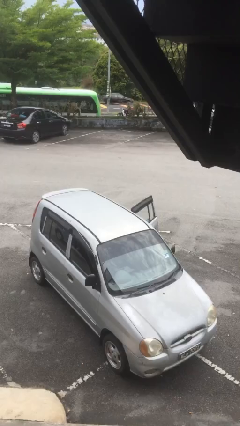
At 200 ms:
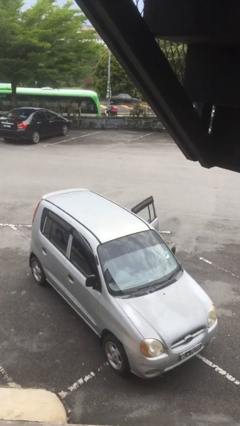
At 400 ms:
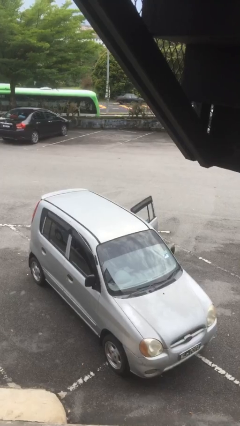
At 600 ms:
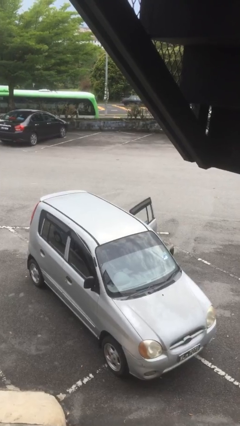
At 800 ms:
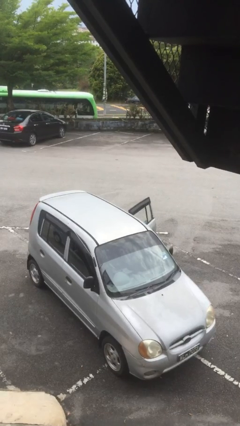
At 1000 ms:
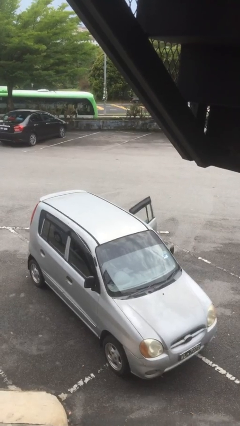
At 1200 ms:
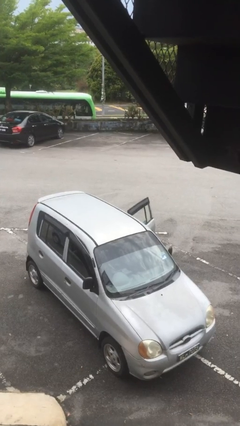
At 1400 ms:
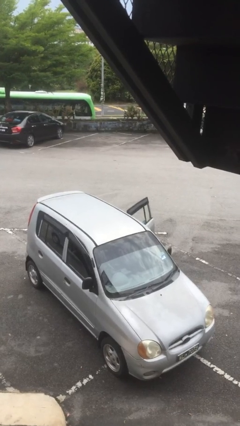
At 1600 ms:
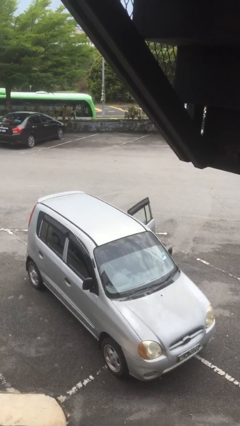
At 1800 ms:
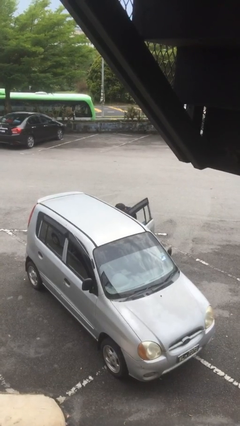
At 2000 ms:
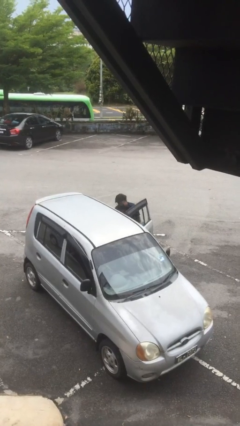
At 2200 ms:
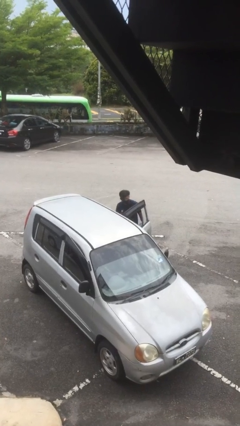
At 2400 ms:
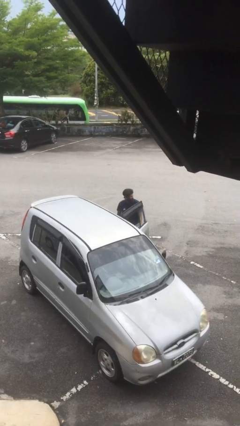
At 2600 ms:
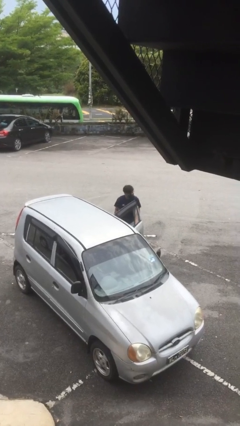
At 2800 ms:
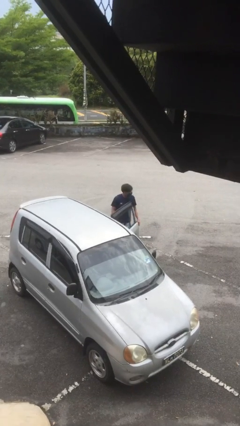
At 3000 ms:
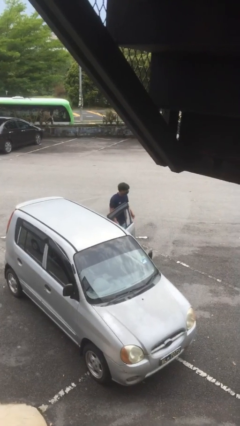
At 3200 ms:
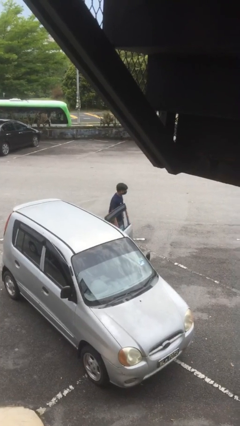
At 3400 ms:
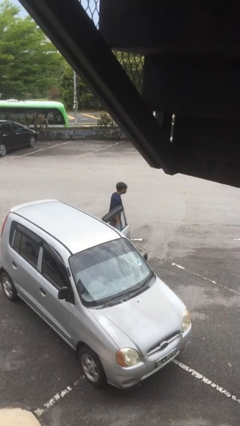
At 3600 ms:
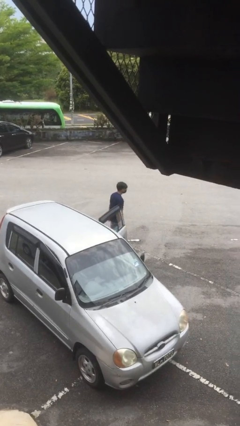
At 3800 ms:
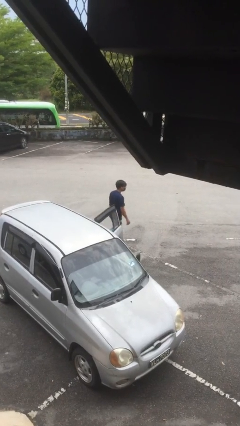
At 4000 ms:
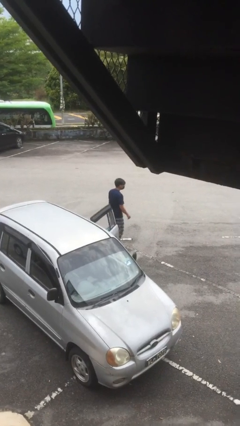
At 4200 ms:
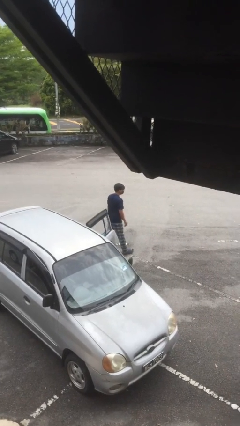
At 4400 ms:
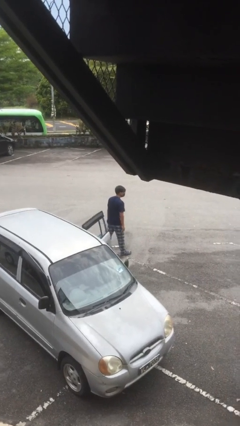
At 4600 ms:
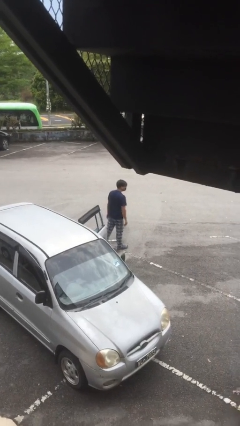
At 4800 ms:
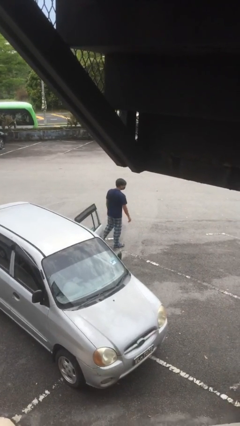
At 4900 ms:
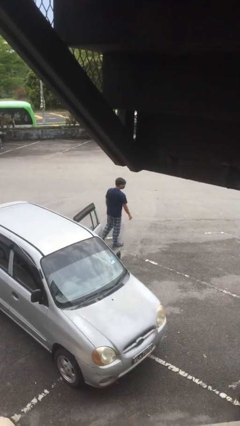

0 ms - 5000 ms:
person exits car

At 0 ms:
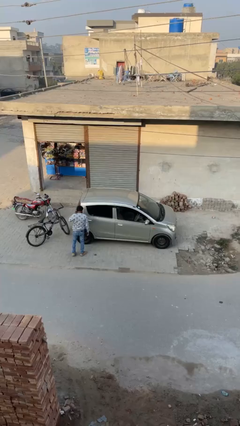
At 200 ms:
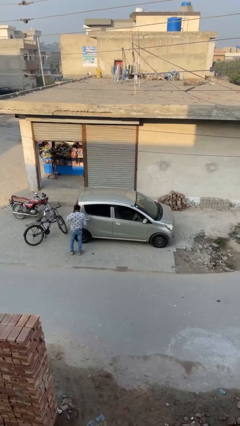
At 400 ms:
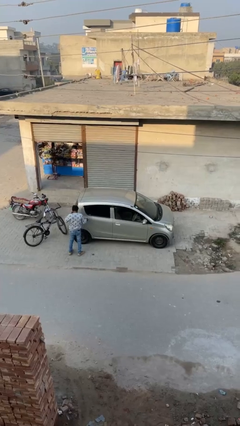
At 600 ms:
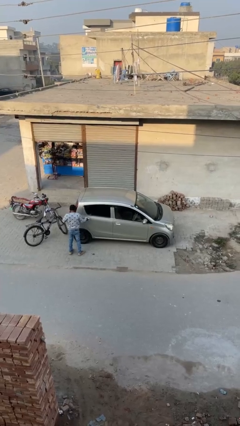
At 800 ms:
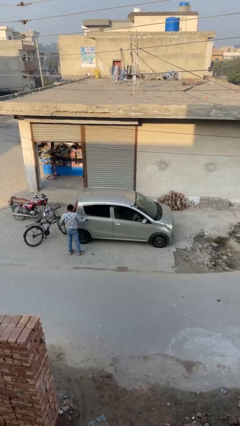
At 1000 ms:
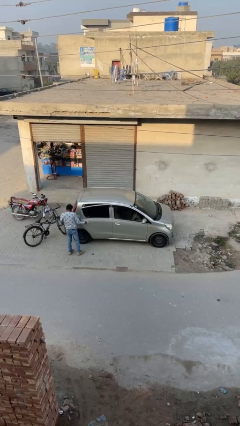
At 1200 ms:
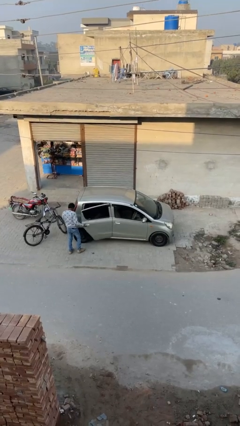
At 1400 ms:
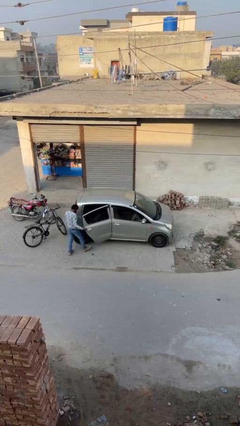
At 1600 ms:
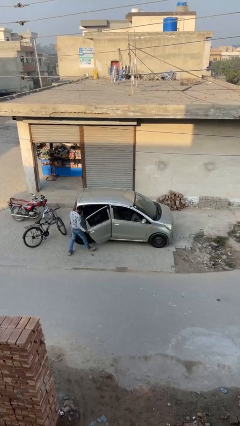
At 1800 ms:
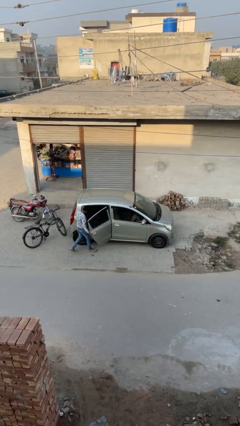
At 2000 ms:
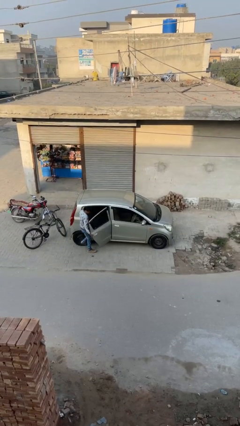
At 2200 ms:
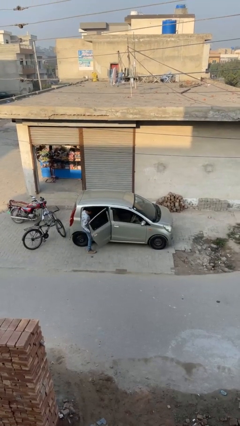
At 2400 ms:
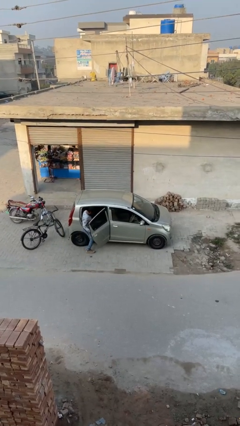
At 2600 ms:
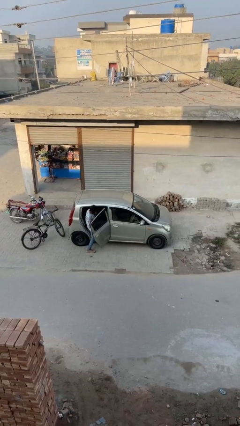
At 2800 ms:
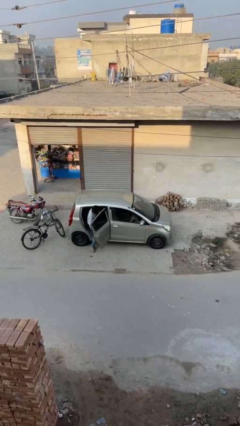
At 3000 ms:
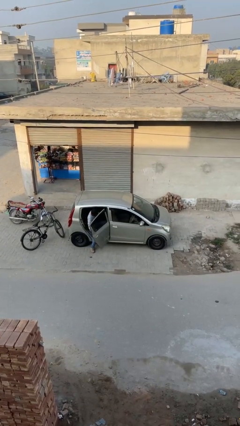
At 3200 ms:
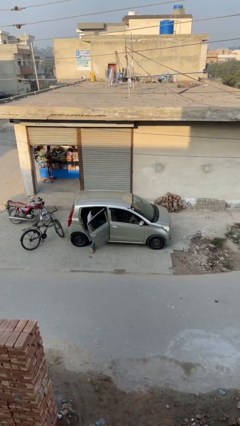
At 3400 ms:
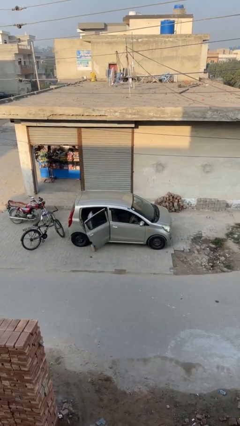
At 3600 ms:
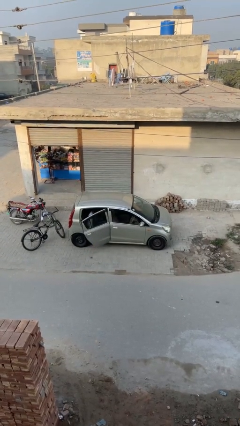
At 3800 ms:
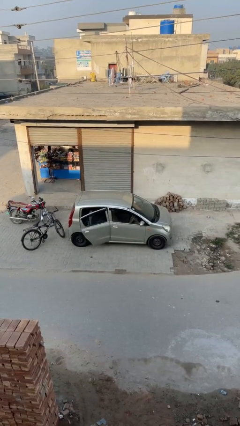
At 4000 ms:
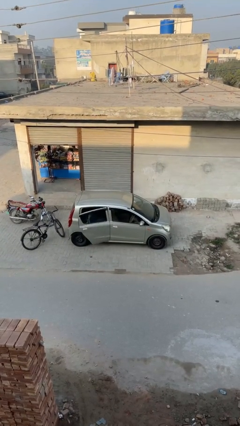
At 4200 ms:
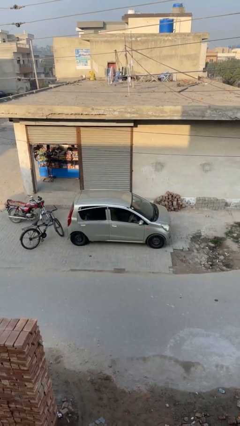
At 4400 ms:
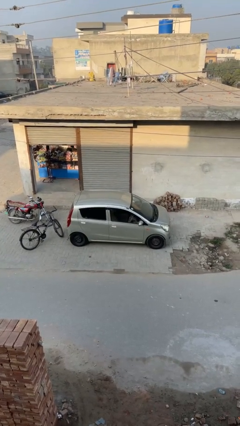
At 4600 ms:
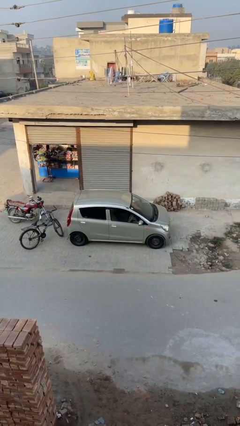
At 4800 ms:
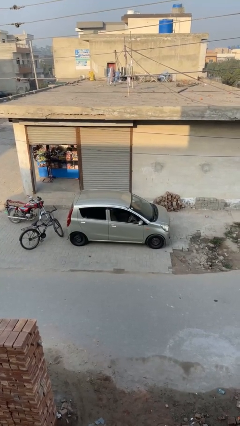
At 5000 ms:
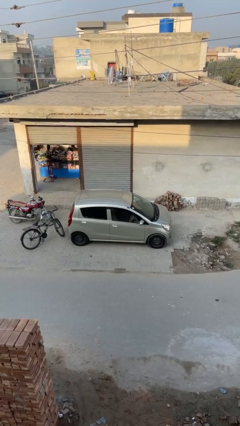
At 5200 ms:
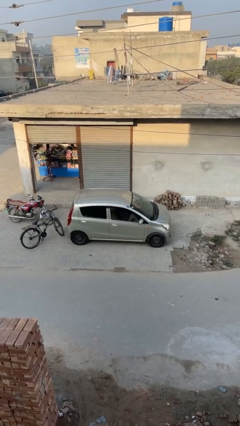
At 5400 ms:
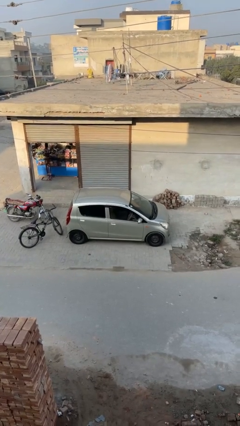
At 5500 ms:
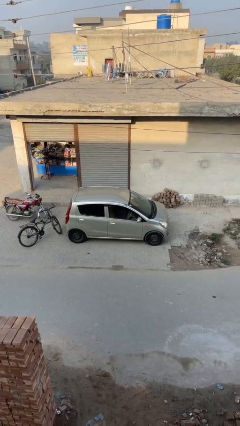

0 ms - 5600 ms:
car picks up person

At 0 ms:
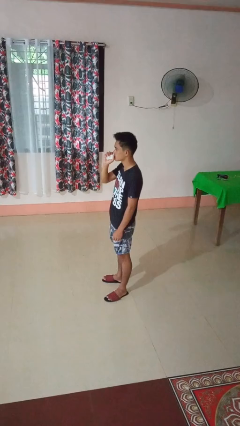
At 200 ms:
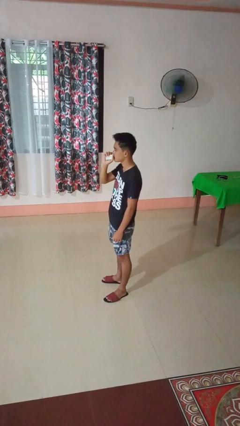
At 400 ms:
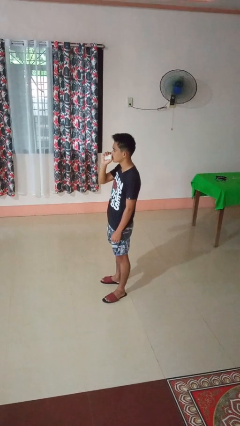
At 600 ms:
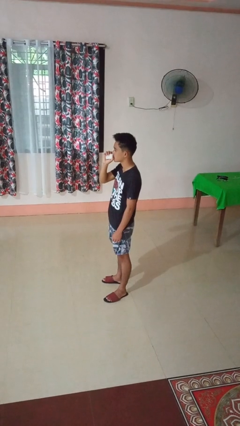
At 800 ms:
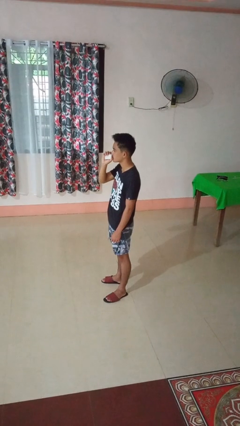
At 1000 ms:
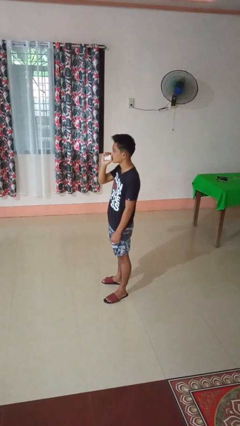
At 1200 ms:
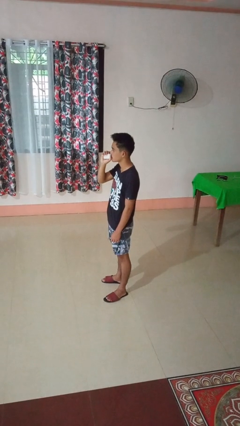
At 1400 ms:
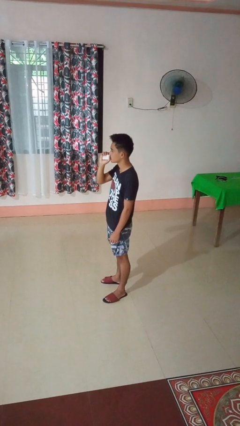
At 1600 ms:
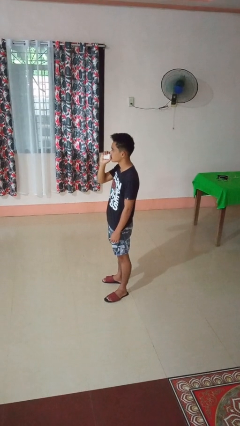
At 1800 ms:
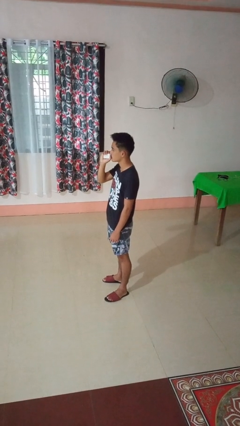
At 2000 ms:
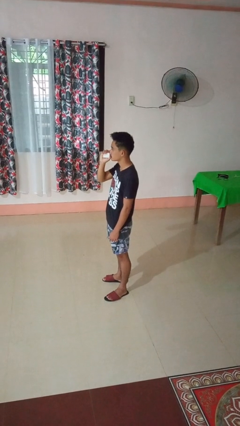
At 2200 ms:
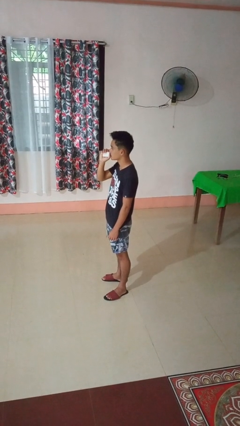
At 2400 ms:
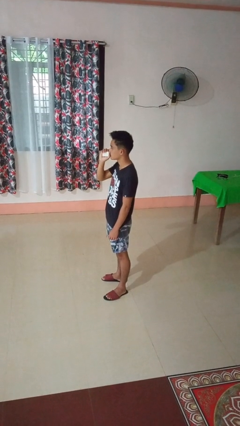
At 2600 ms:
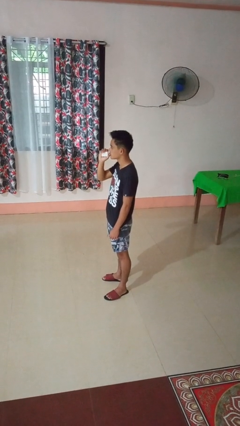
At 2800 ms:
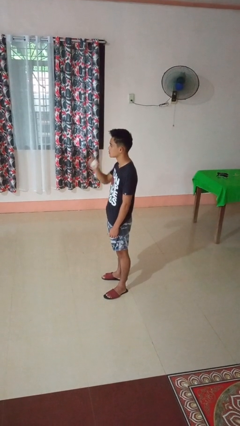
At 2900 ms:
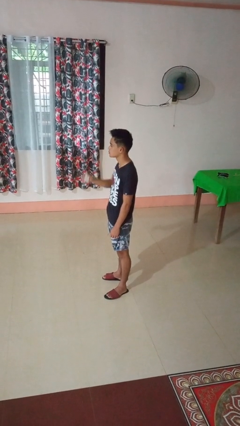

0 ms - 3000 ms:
person vapes

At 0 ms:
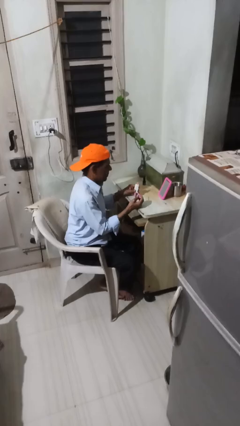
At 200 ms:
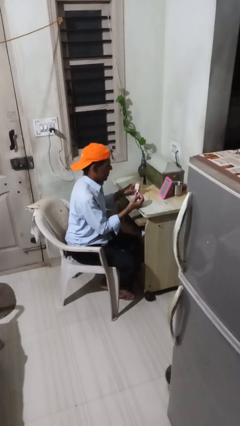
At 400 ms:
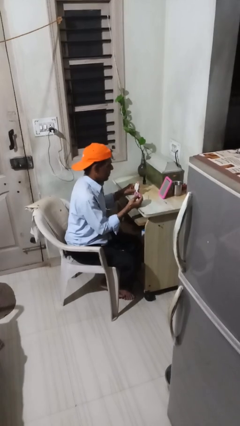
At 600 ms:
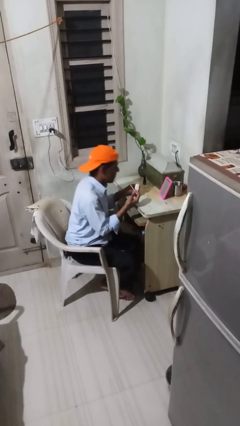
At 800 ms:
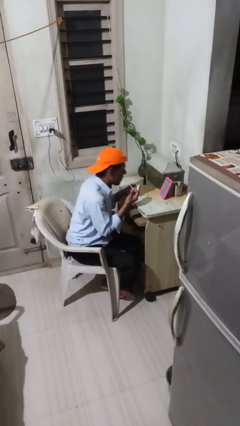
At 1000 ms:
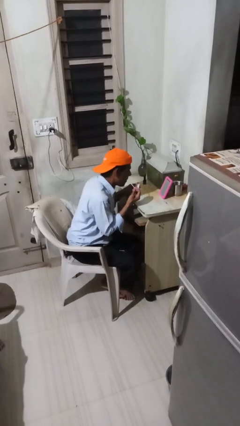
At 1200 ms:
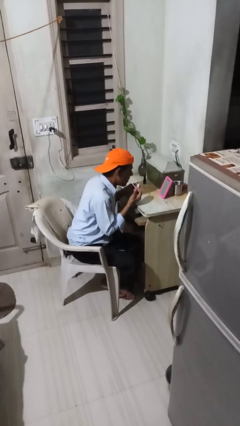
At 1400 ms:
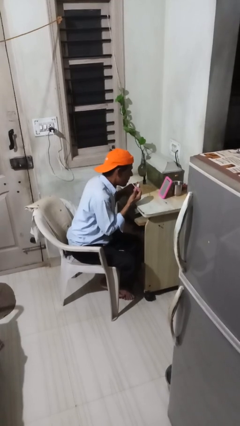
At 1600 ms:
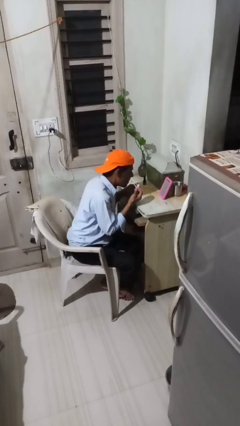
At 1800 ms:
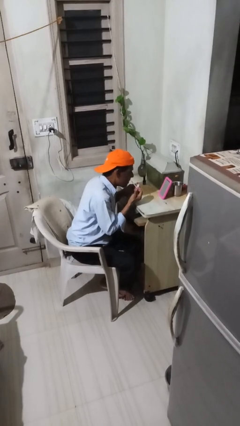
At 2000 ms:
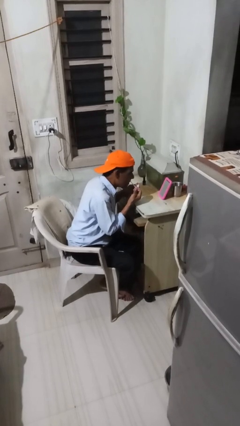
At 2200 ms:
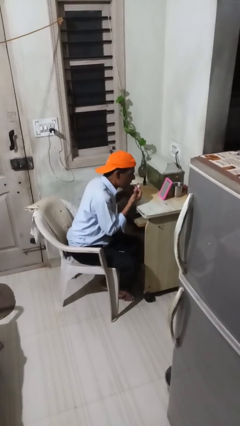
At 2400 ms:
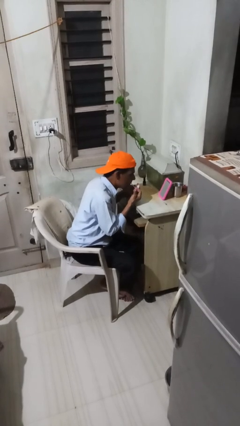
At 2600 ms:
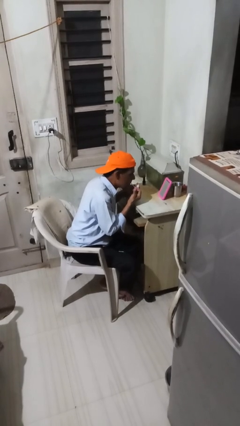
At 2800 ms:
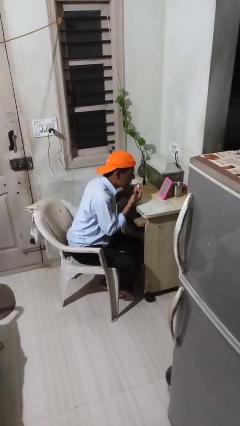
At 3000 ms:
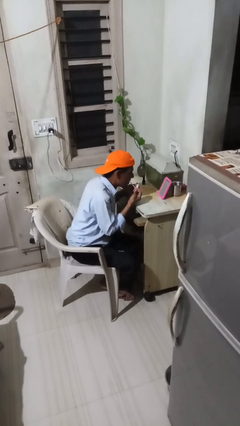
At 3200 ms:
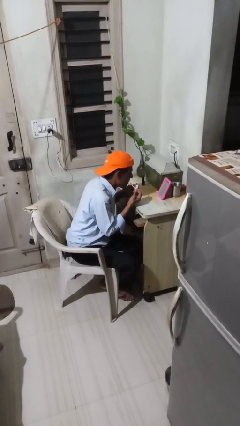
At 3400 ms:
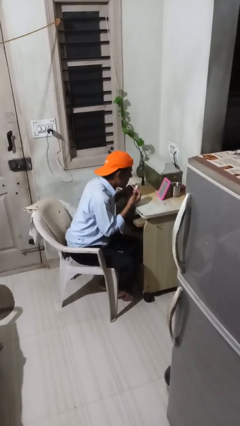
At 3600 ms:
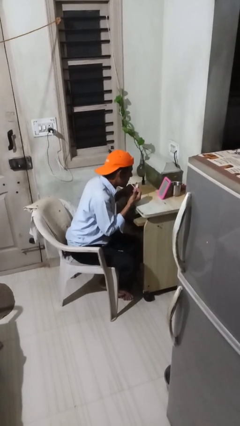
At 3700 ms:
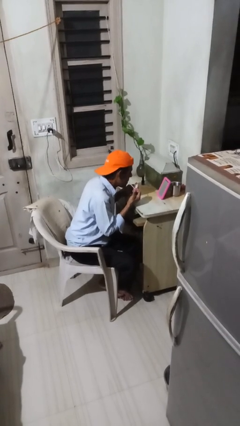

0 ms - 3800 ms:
person applies lip makeup

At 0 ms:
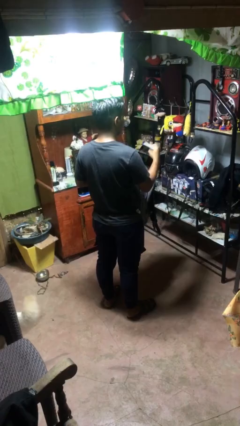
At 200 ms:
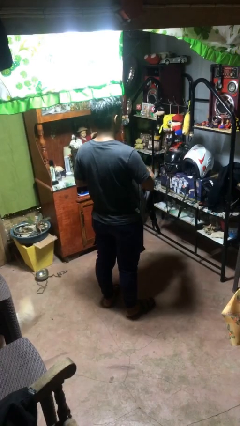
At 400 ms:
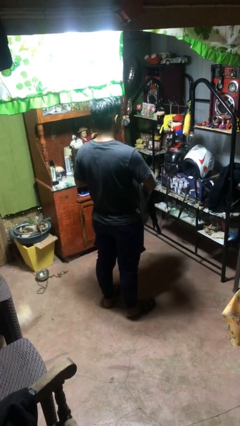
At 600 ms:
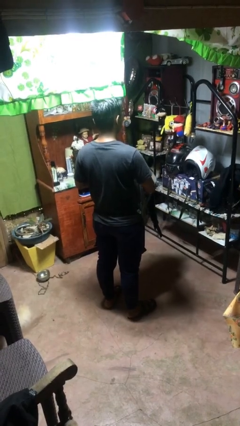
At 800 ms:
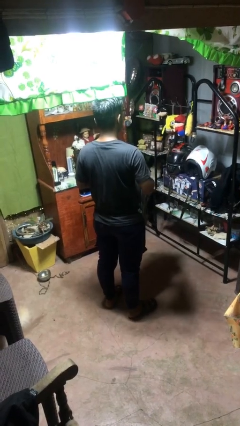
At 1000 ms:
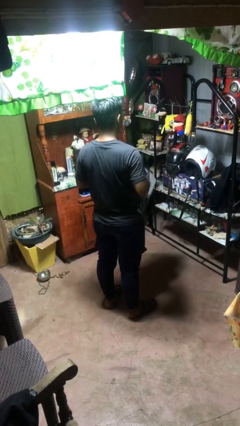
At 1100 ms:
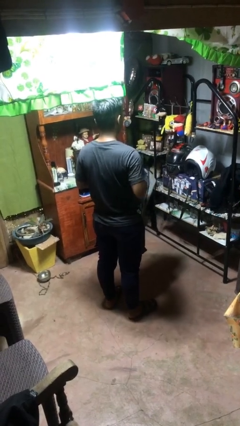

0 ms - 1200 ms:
person puts object into bag
